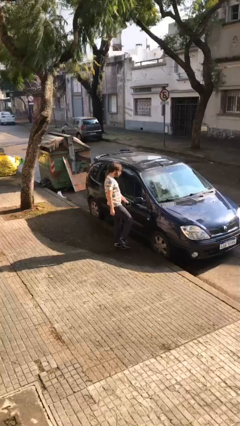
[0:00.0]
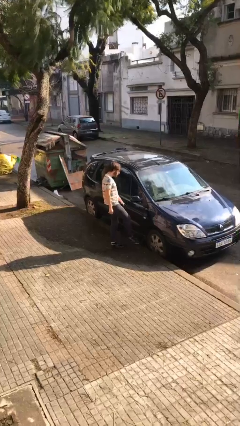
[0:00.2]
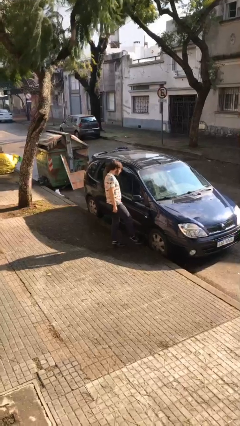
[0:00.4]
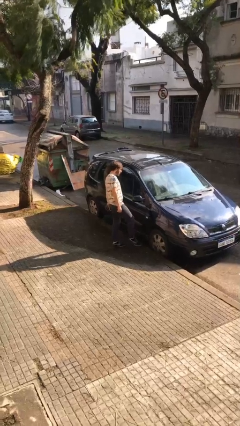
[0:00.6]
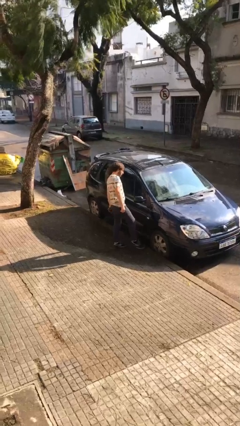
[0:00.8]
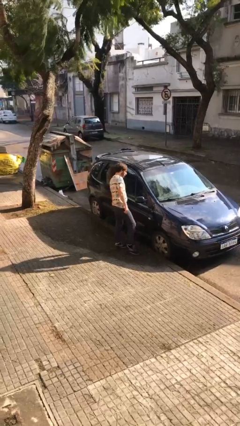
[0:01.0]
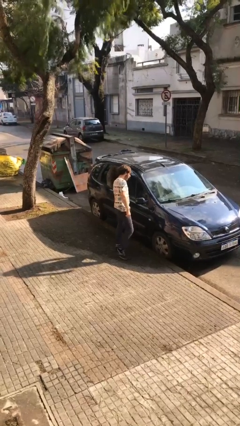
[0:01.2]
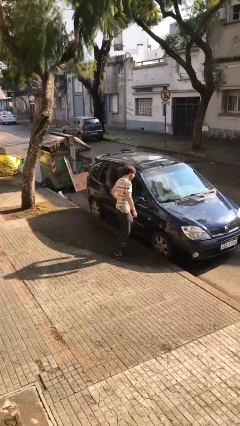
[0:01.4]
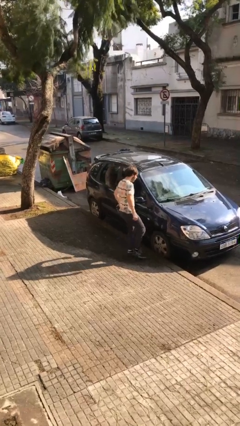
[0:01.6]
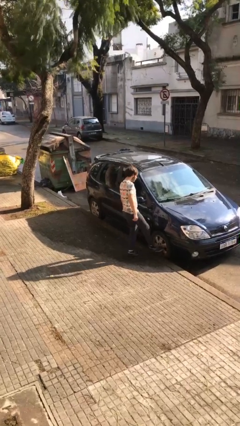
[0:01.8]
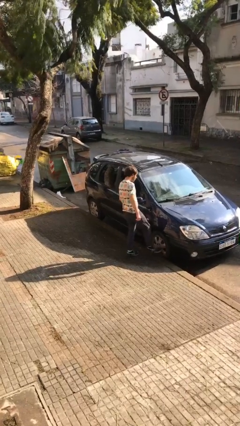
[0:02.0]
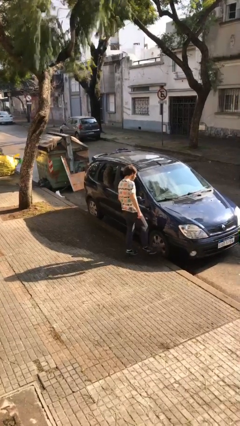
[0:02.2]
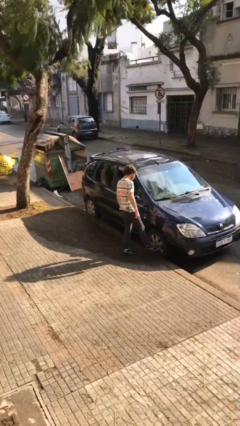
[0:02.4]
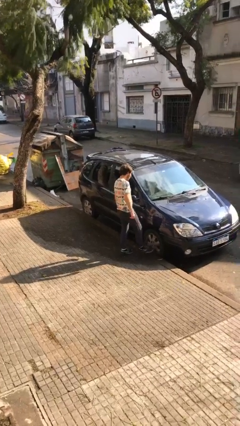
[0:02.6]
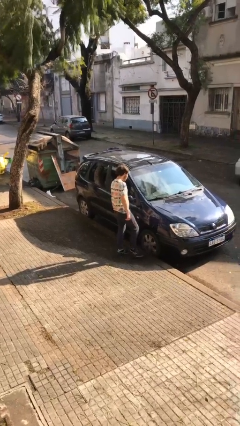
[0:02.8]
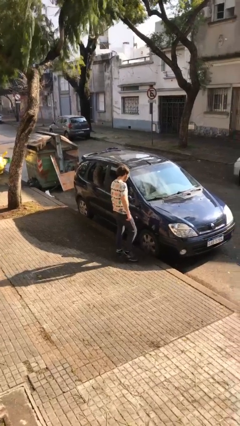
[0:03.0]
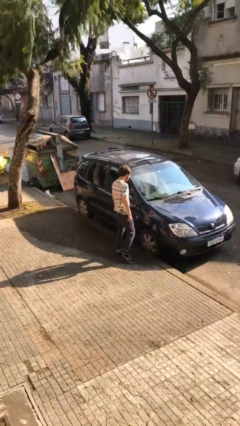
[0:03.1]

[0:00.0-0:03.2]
person kicks car tires

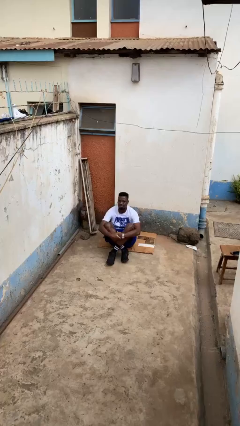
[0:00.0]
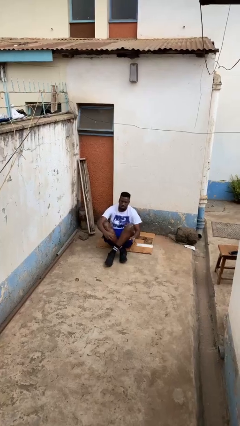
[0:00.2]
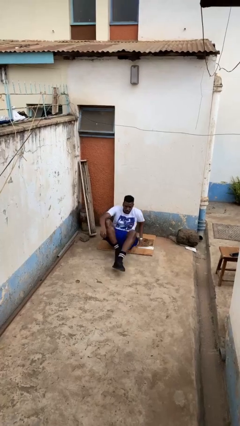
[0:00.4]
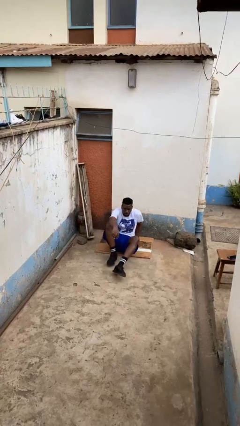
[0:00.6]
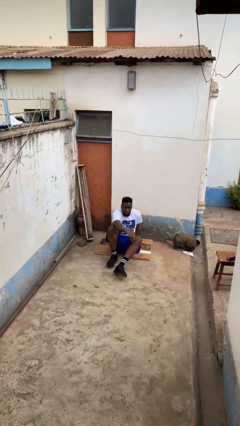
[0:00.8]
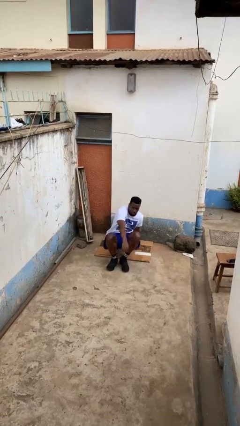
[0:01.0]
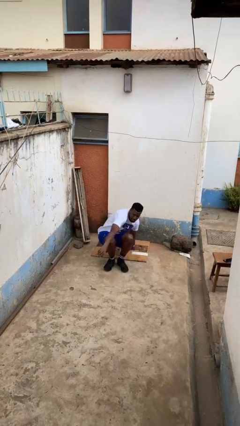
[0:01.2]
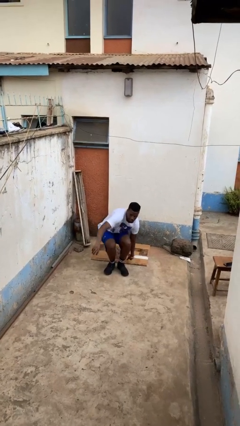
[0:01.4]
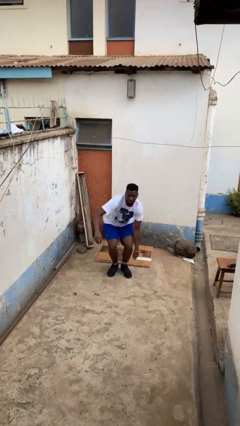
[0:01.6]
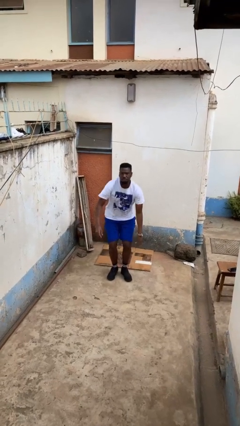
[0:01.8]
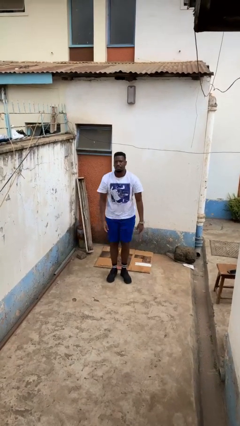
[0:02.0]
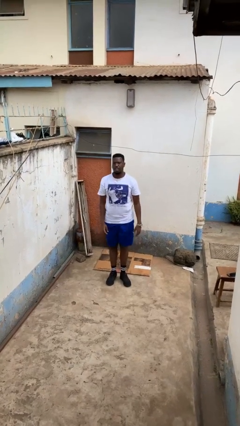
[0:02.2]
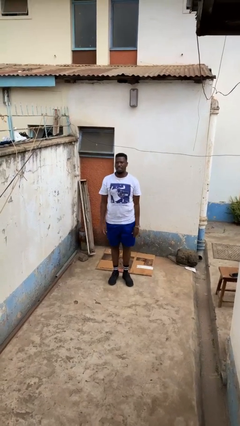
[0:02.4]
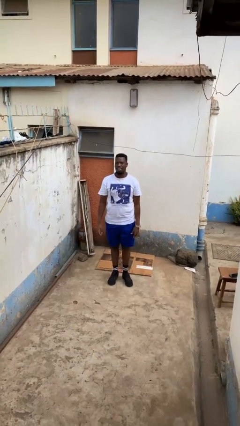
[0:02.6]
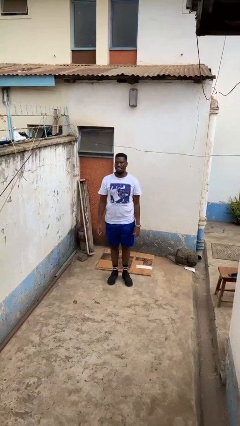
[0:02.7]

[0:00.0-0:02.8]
person stands up from floor

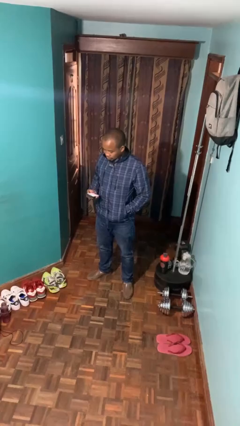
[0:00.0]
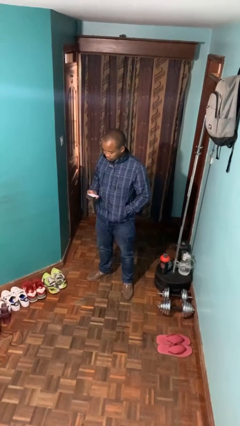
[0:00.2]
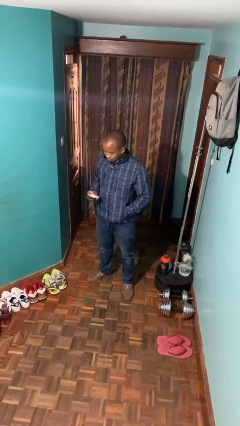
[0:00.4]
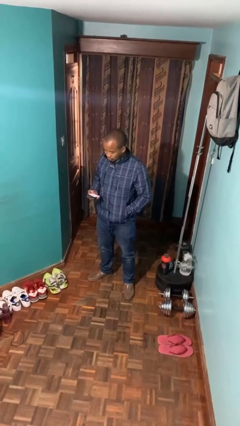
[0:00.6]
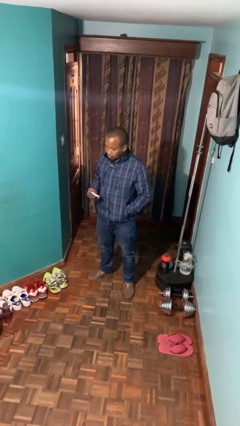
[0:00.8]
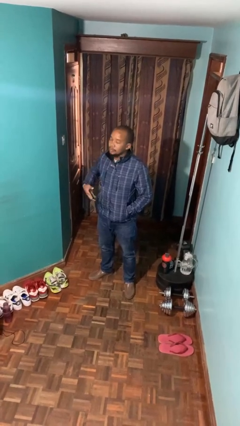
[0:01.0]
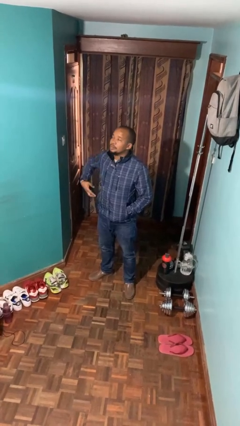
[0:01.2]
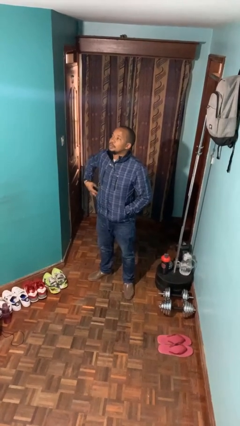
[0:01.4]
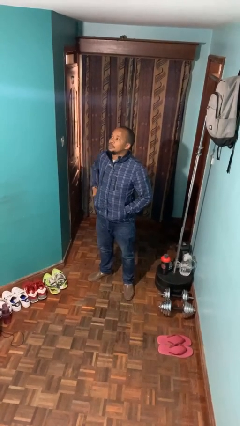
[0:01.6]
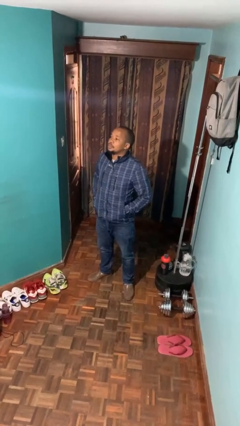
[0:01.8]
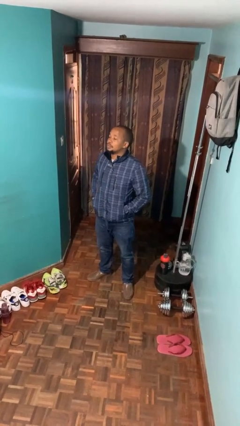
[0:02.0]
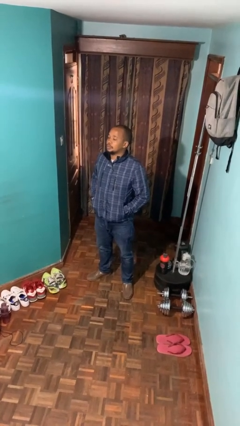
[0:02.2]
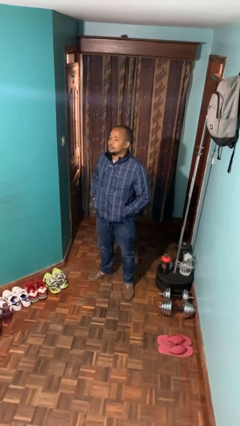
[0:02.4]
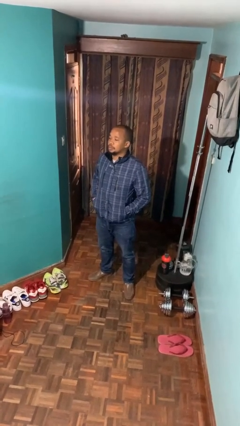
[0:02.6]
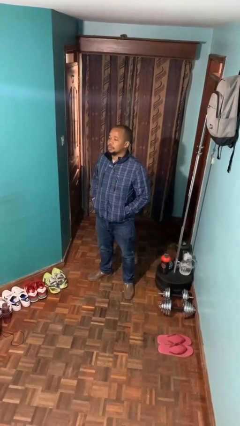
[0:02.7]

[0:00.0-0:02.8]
person puts phone into pocket

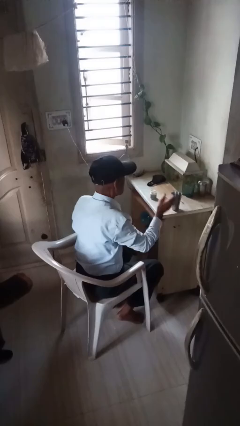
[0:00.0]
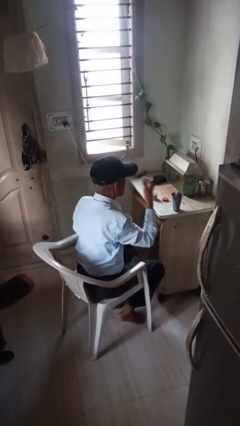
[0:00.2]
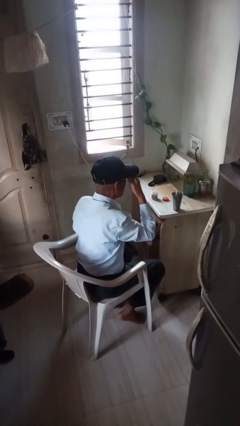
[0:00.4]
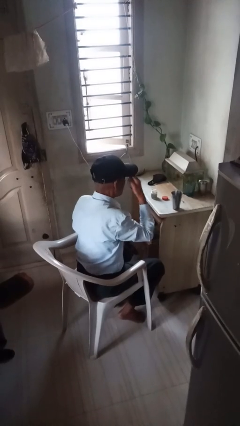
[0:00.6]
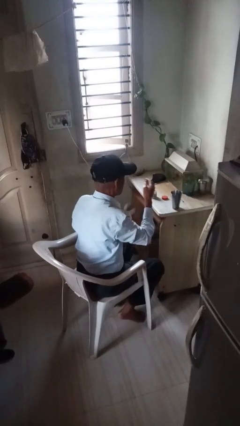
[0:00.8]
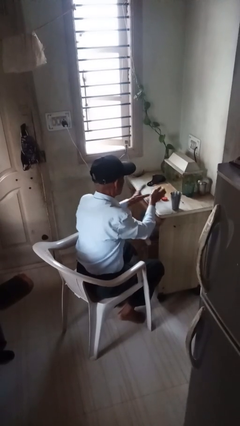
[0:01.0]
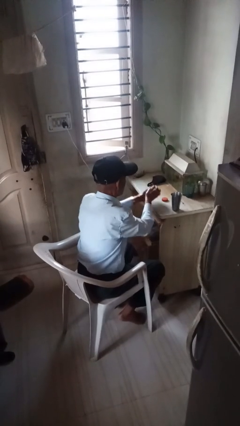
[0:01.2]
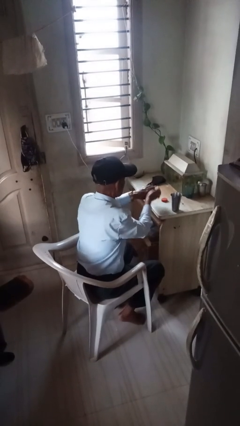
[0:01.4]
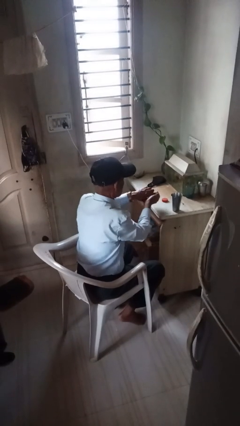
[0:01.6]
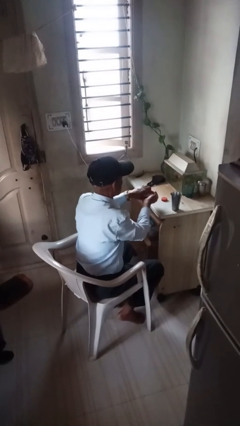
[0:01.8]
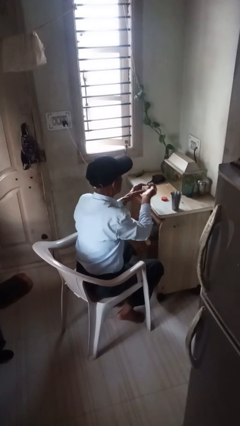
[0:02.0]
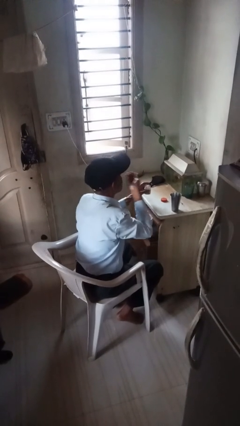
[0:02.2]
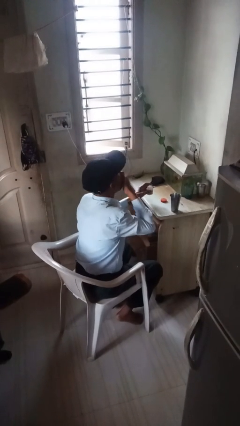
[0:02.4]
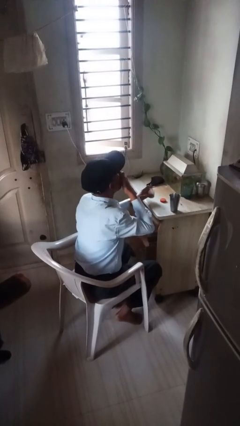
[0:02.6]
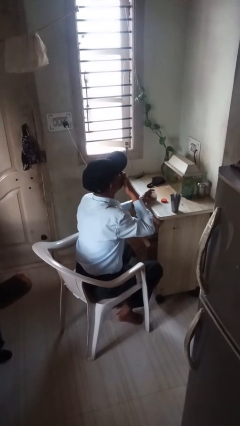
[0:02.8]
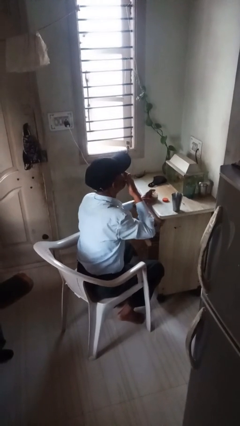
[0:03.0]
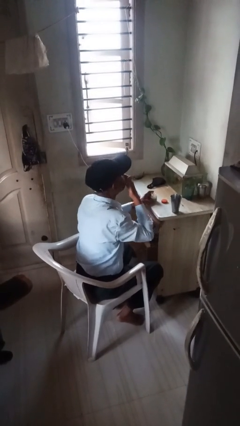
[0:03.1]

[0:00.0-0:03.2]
person takes medicine pills

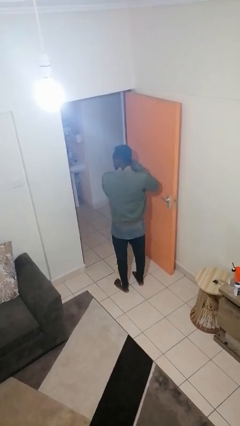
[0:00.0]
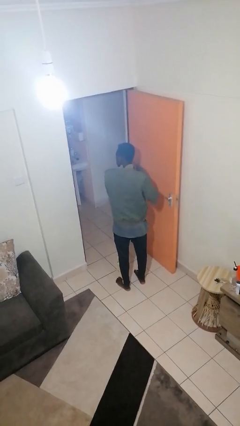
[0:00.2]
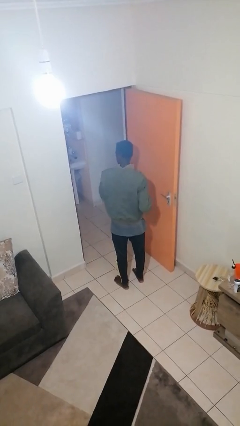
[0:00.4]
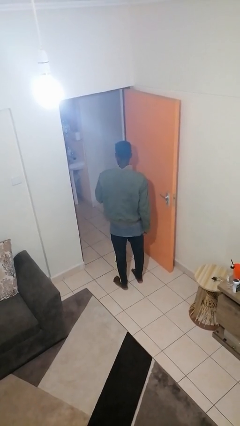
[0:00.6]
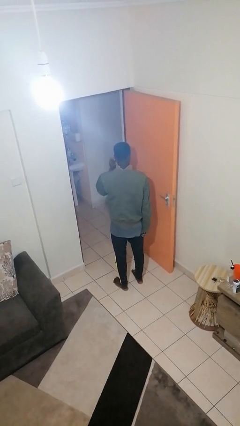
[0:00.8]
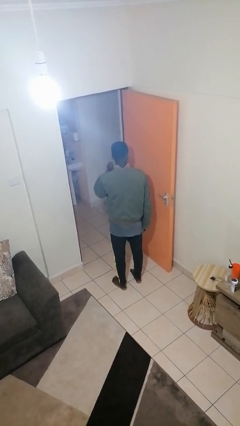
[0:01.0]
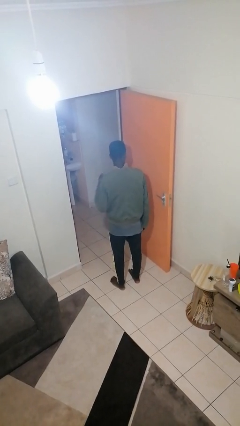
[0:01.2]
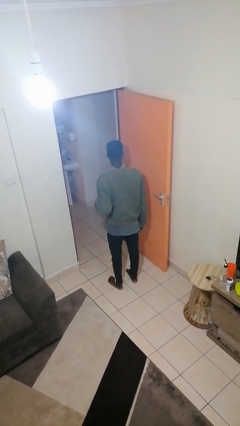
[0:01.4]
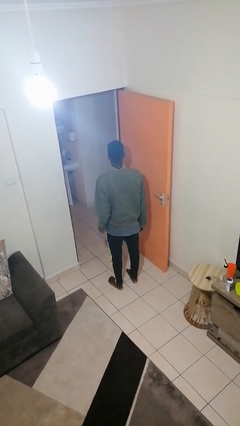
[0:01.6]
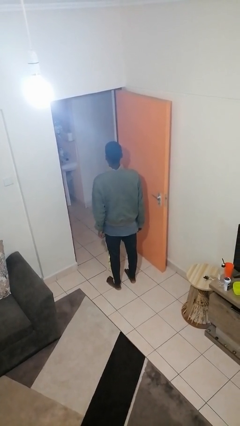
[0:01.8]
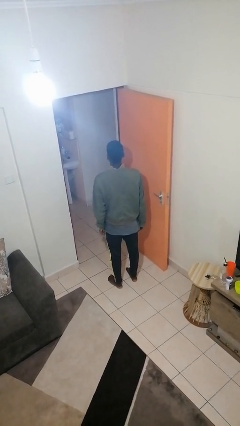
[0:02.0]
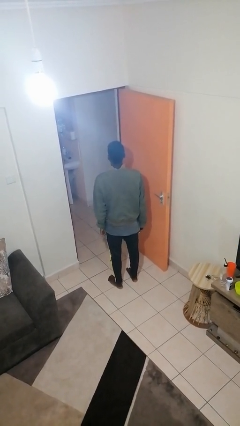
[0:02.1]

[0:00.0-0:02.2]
person takes off earrings

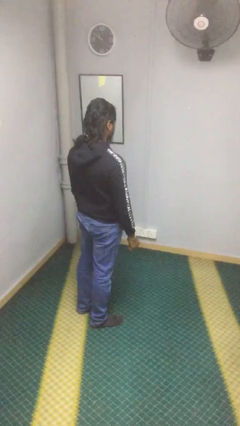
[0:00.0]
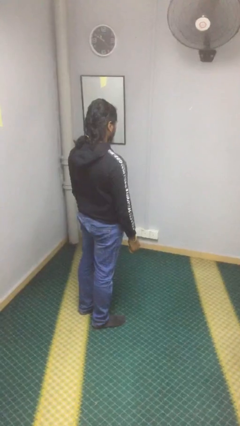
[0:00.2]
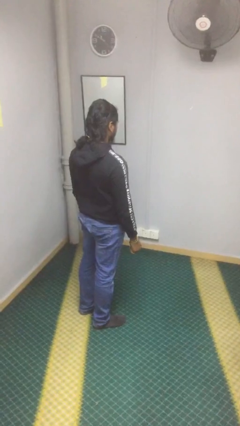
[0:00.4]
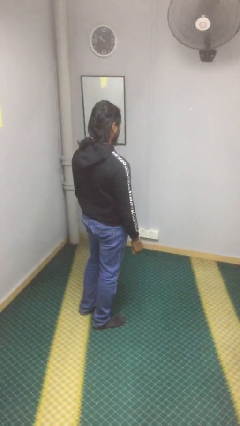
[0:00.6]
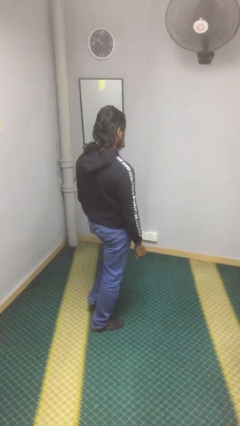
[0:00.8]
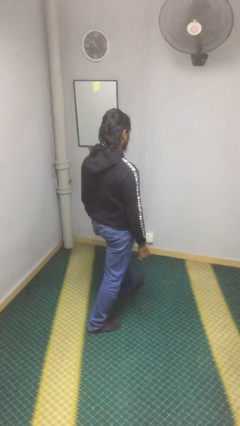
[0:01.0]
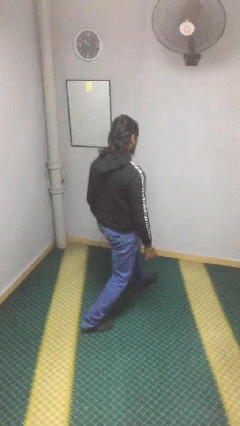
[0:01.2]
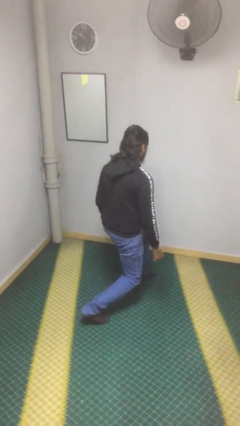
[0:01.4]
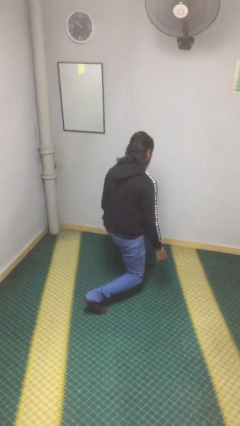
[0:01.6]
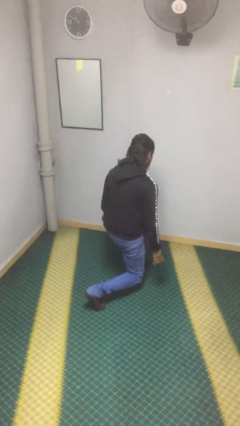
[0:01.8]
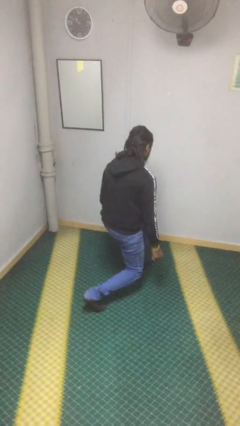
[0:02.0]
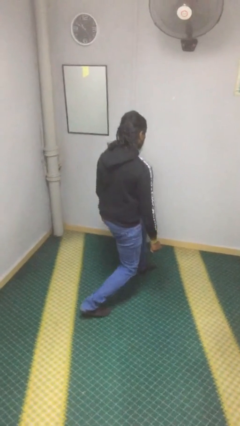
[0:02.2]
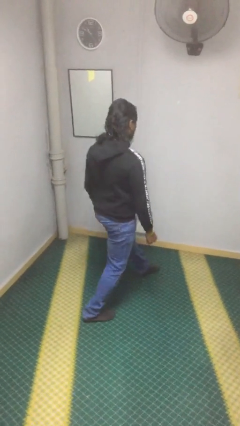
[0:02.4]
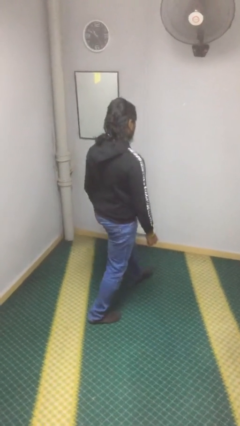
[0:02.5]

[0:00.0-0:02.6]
person exercises with lunges

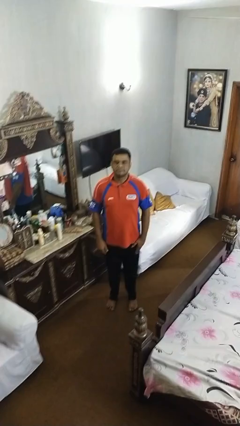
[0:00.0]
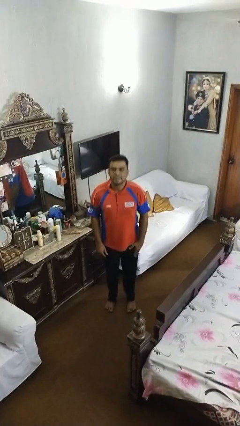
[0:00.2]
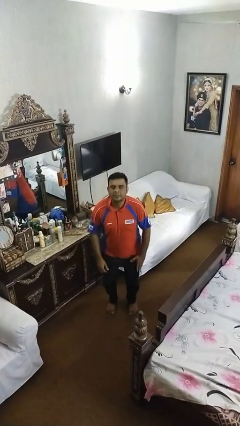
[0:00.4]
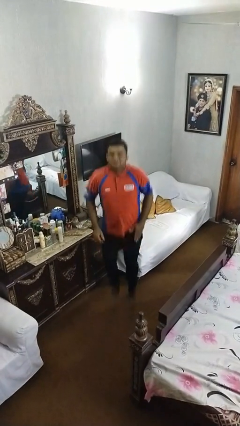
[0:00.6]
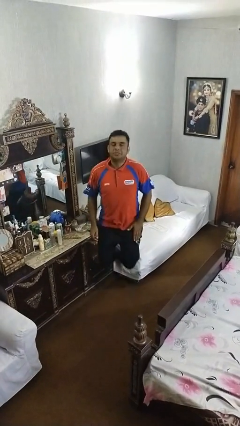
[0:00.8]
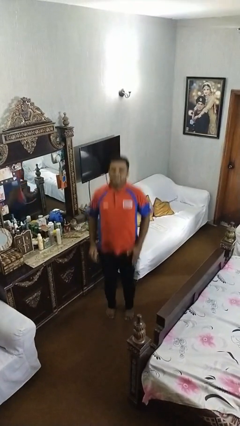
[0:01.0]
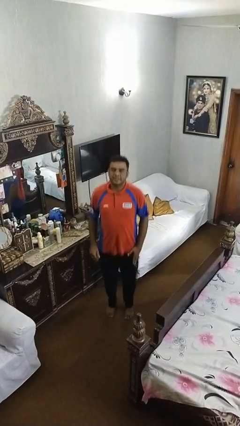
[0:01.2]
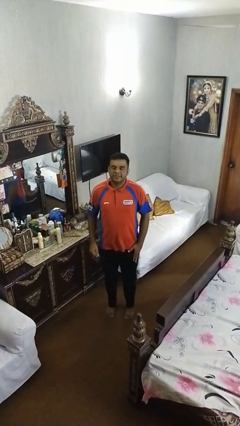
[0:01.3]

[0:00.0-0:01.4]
person jumps
